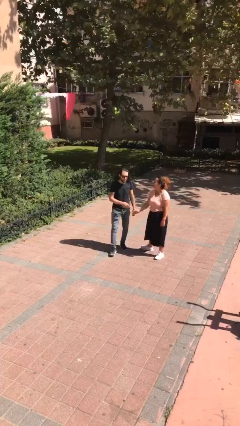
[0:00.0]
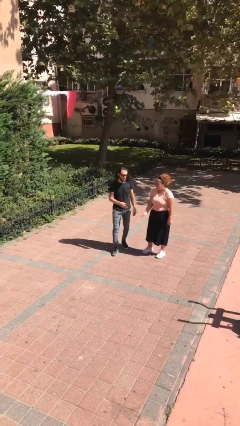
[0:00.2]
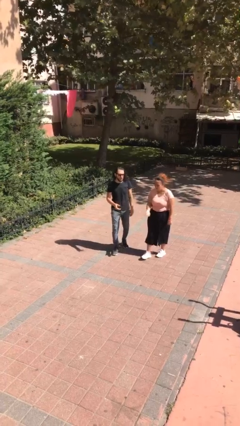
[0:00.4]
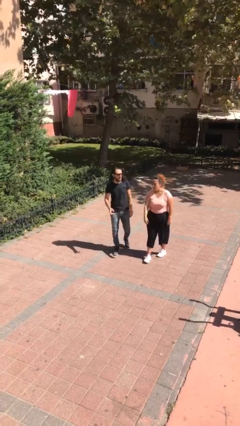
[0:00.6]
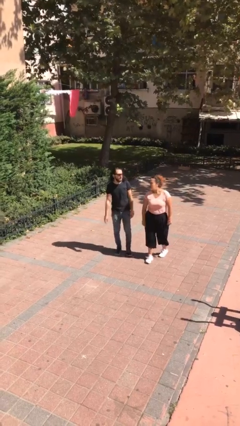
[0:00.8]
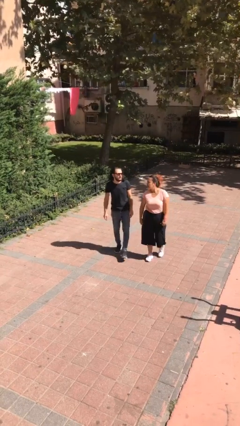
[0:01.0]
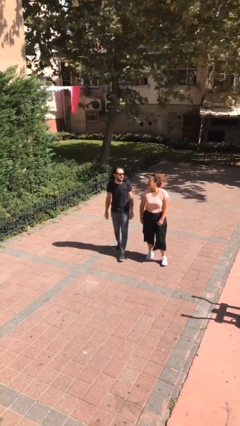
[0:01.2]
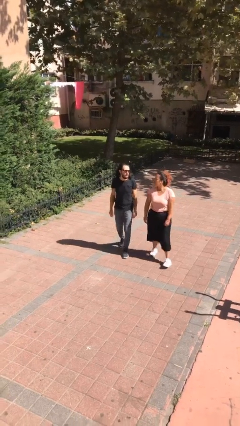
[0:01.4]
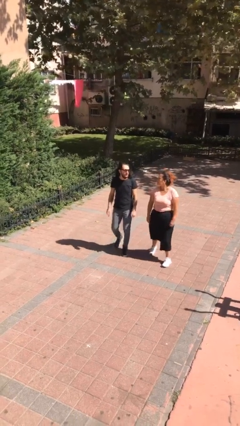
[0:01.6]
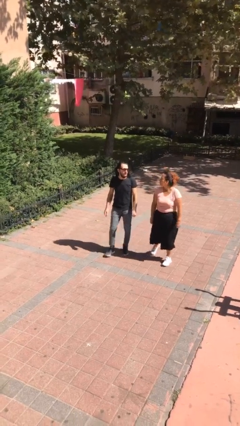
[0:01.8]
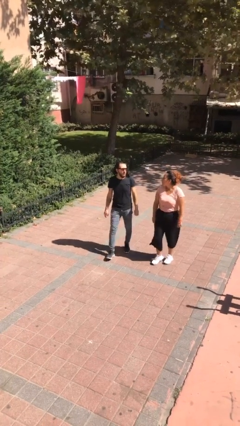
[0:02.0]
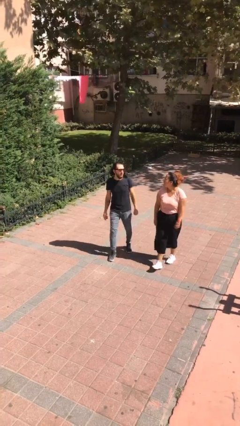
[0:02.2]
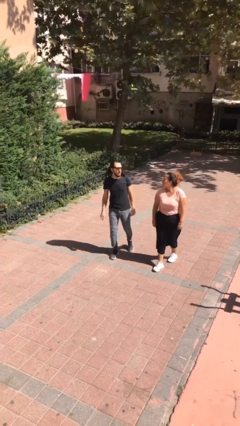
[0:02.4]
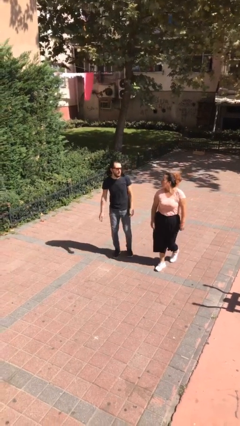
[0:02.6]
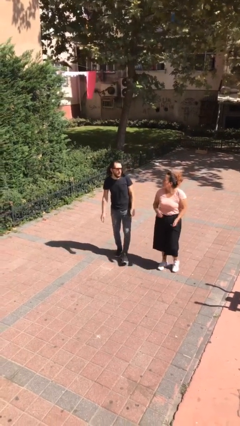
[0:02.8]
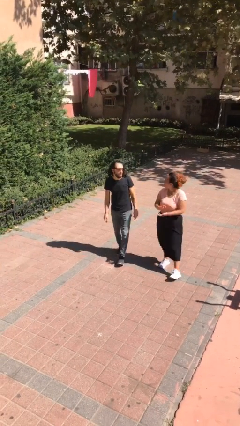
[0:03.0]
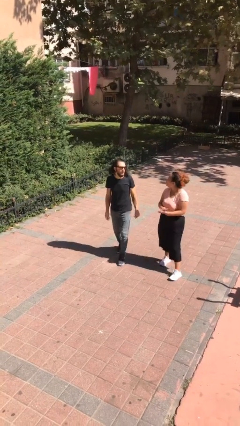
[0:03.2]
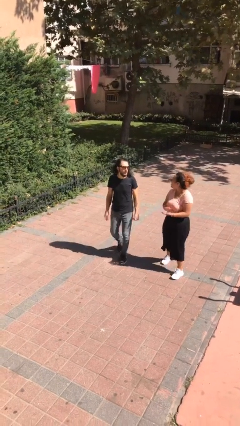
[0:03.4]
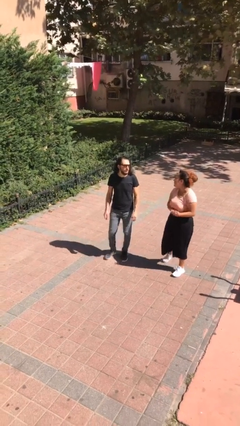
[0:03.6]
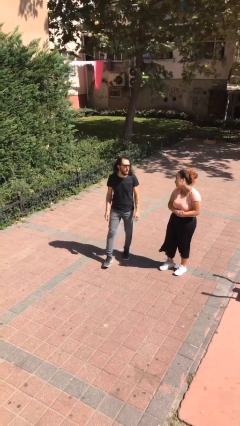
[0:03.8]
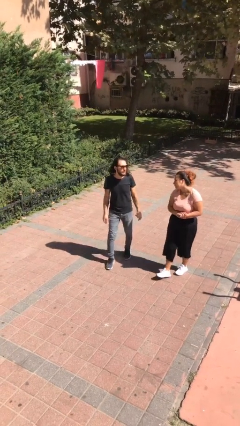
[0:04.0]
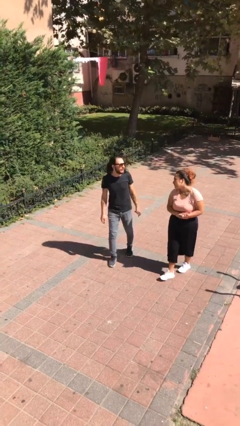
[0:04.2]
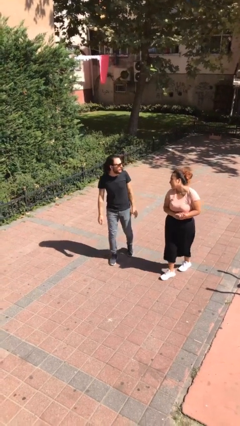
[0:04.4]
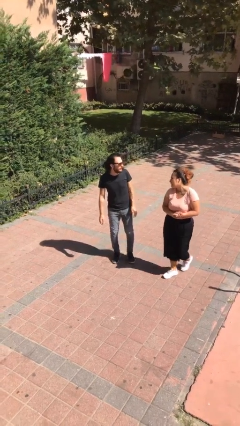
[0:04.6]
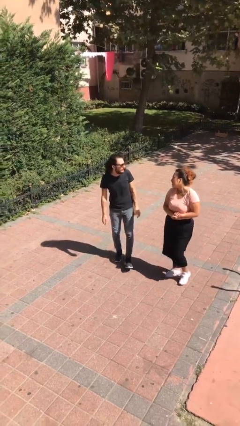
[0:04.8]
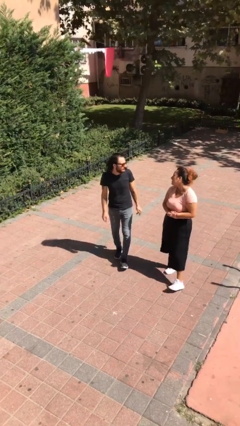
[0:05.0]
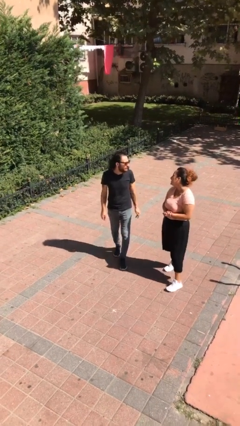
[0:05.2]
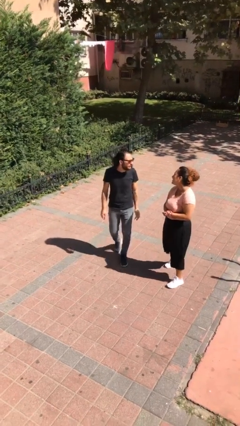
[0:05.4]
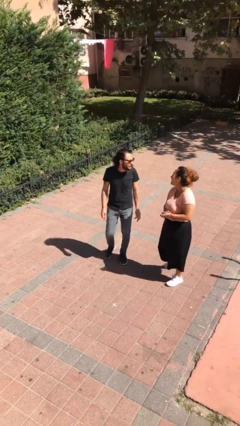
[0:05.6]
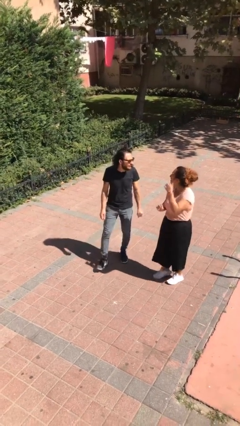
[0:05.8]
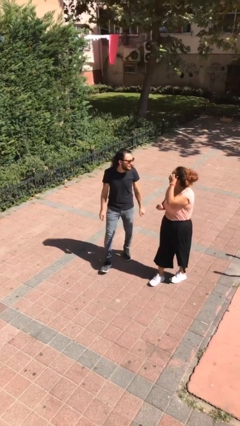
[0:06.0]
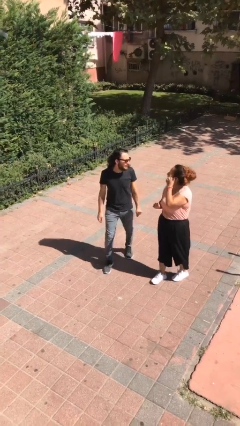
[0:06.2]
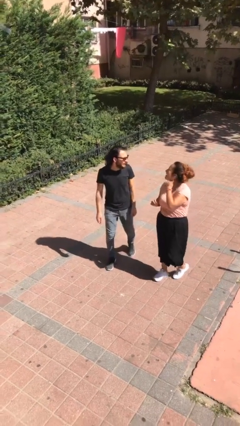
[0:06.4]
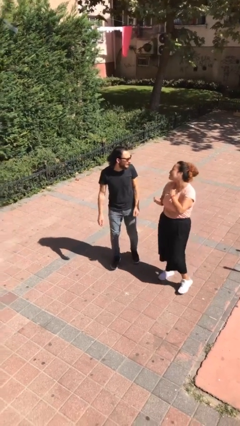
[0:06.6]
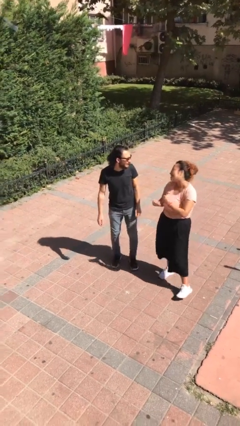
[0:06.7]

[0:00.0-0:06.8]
person talks to person

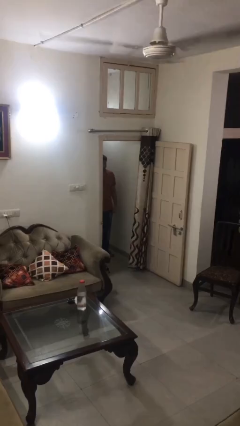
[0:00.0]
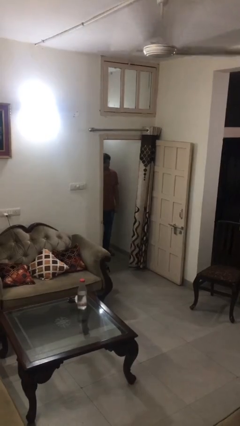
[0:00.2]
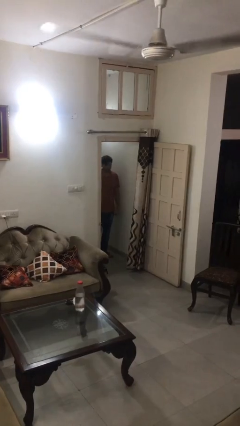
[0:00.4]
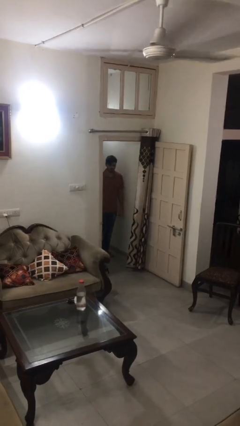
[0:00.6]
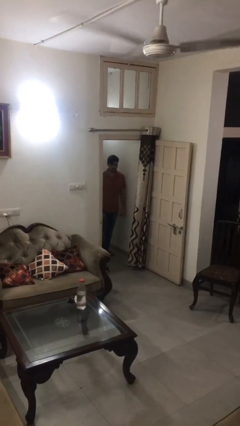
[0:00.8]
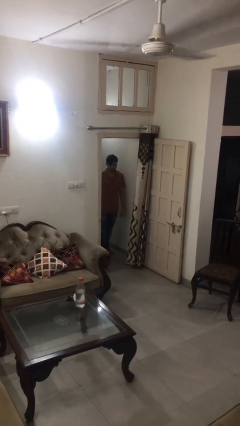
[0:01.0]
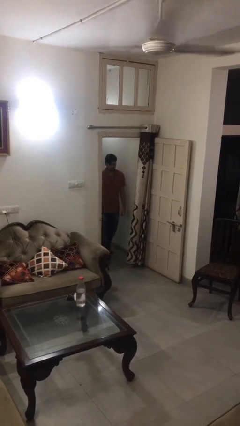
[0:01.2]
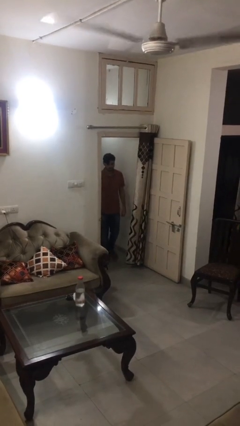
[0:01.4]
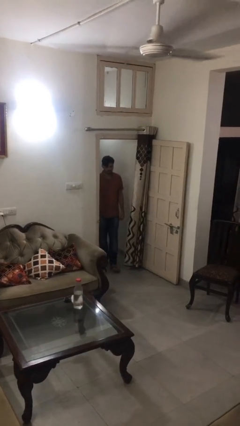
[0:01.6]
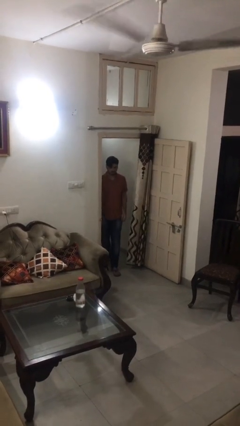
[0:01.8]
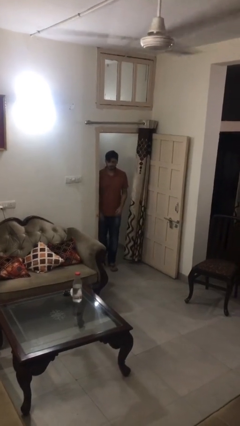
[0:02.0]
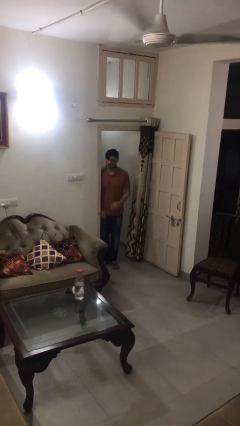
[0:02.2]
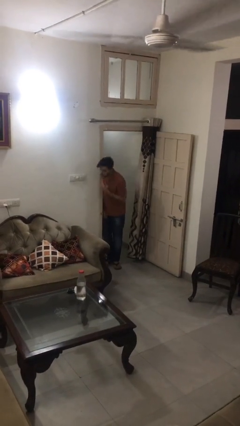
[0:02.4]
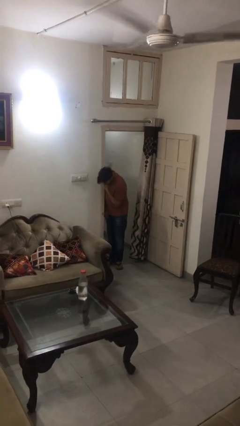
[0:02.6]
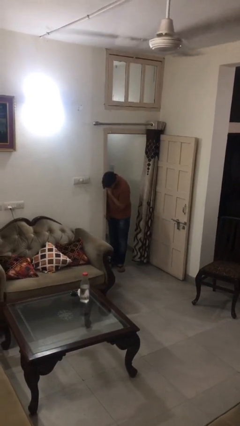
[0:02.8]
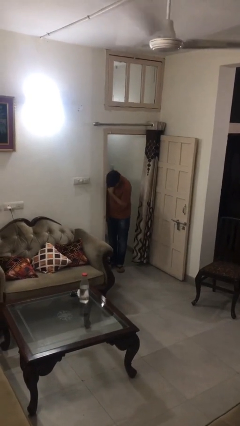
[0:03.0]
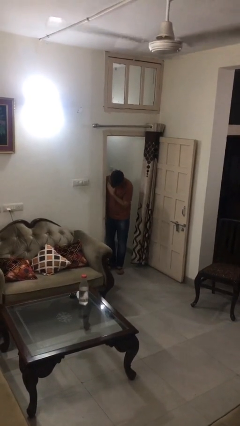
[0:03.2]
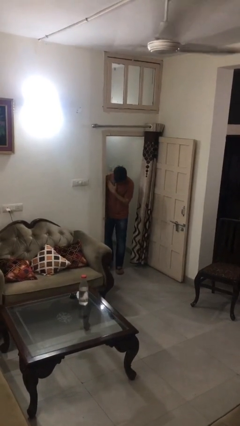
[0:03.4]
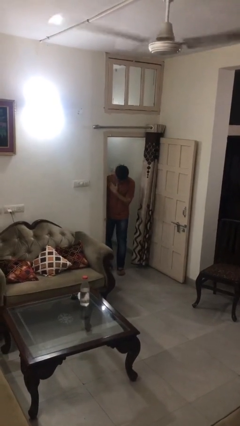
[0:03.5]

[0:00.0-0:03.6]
person bumps into wall

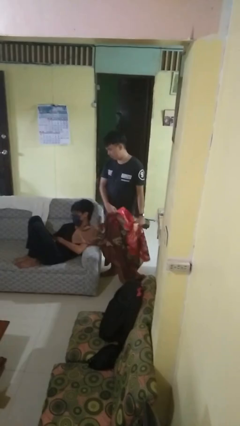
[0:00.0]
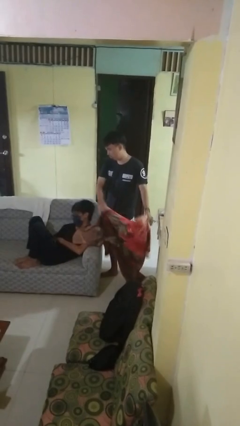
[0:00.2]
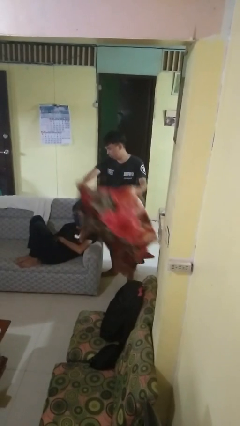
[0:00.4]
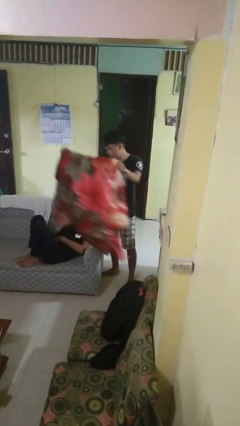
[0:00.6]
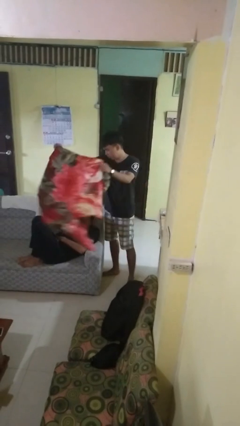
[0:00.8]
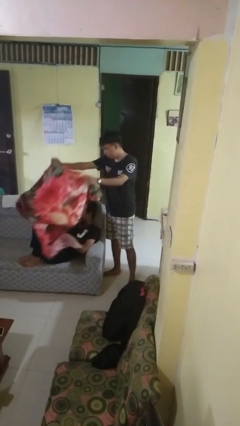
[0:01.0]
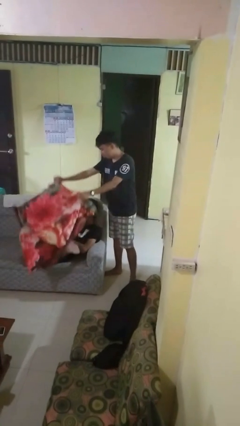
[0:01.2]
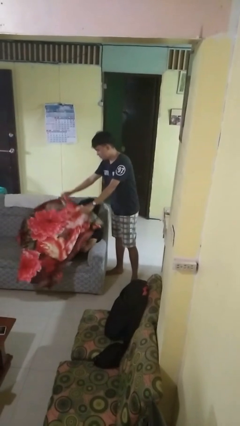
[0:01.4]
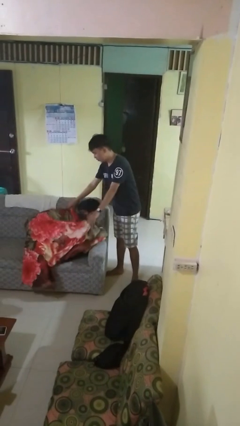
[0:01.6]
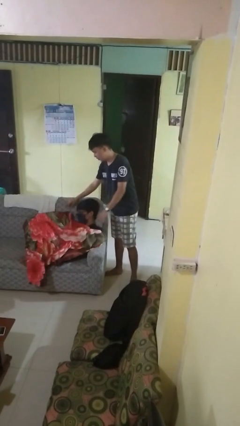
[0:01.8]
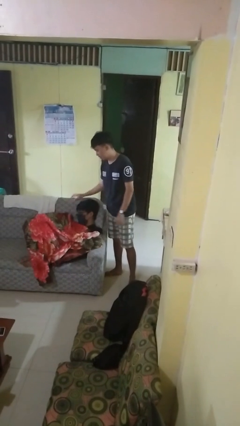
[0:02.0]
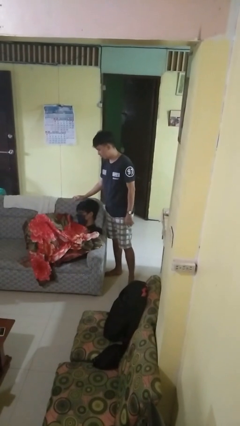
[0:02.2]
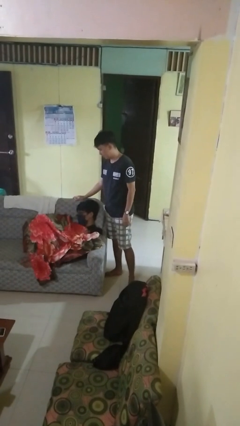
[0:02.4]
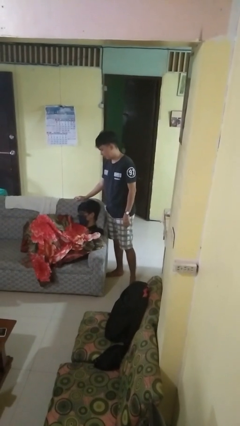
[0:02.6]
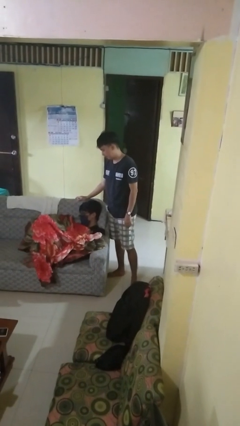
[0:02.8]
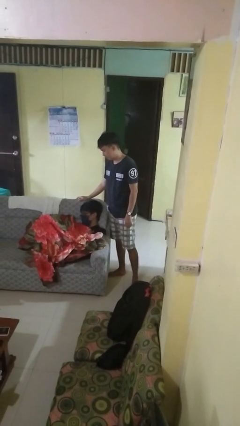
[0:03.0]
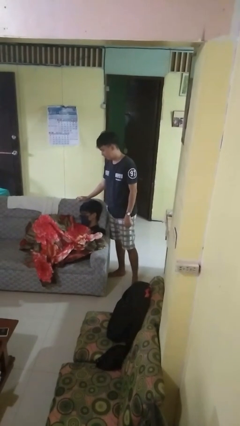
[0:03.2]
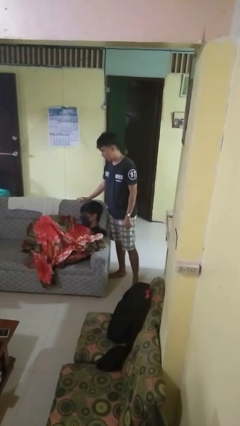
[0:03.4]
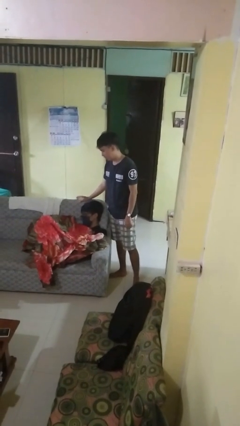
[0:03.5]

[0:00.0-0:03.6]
person covers friend with blanket

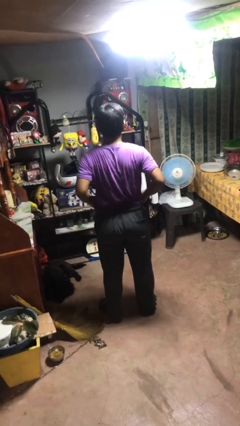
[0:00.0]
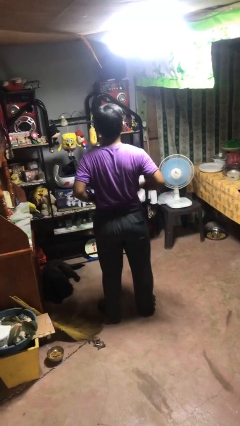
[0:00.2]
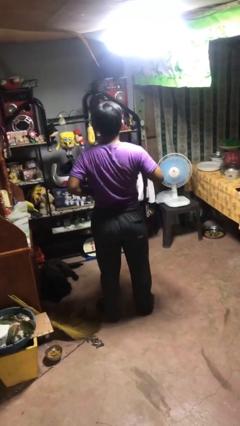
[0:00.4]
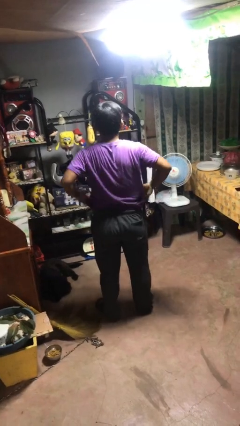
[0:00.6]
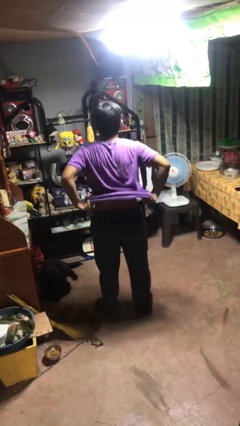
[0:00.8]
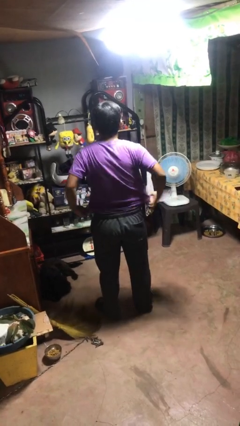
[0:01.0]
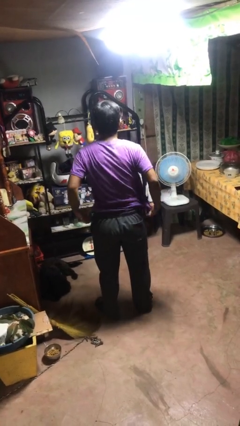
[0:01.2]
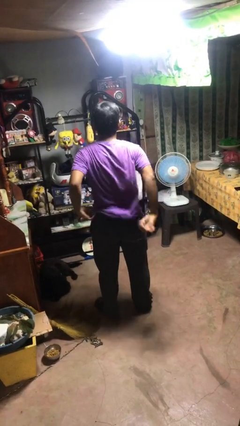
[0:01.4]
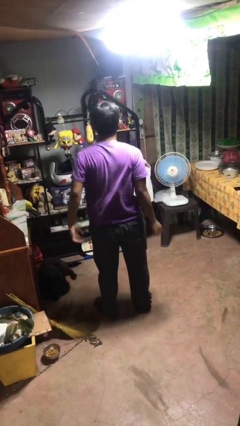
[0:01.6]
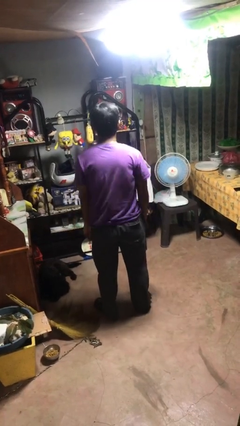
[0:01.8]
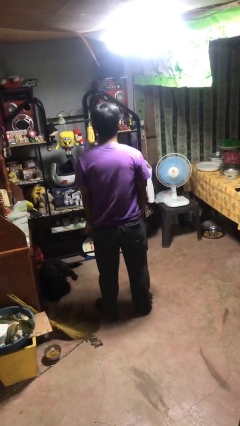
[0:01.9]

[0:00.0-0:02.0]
person untucks shirt

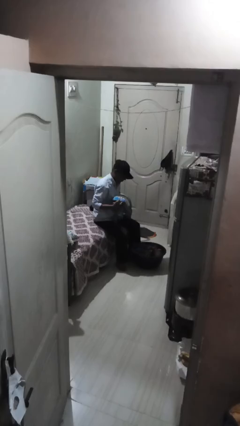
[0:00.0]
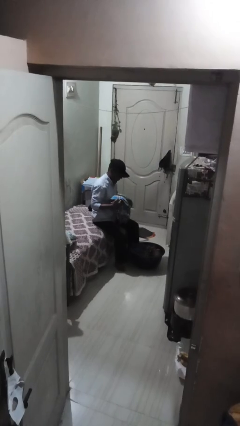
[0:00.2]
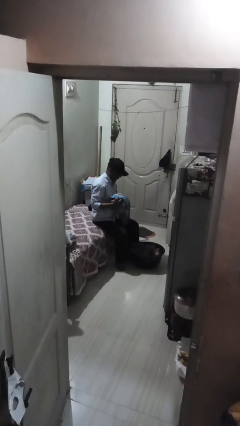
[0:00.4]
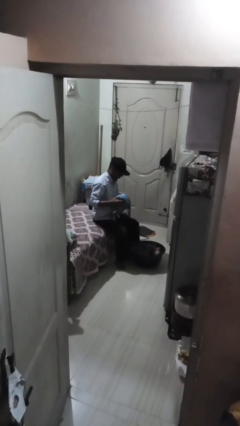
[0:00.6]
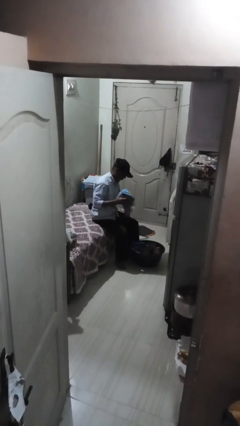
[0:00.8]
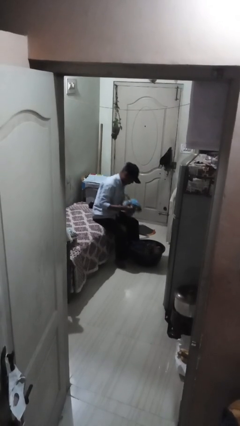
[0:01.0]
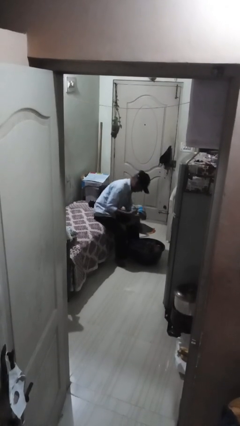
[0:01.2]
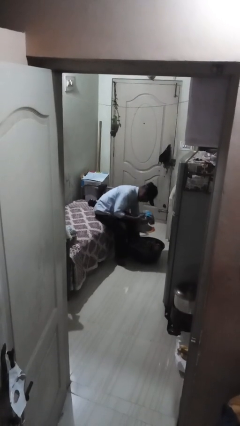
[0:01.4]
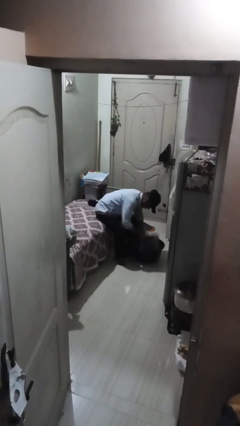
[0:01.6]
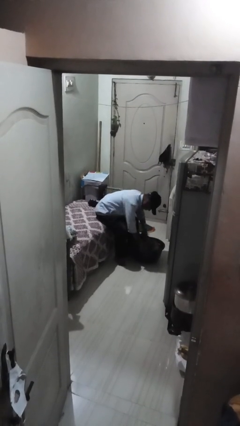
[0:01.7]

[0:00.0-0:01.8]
person puts object into basket
